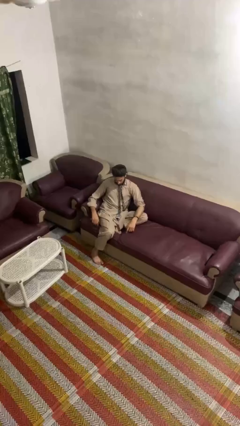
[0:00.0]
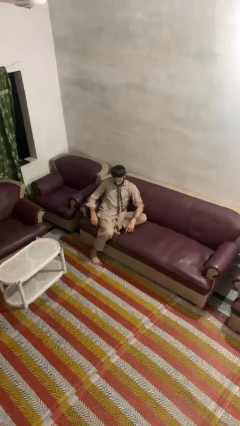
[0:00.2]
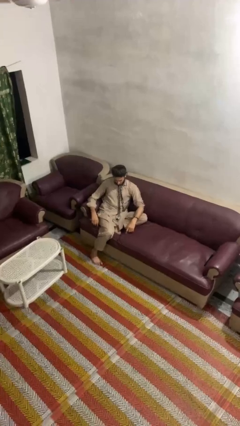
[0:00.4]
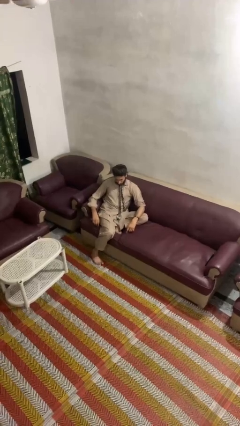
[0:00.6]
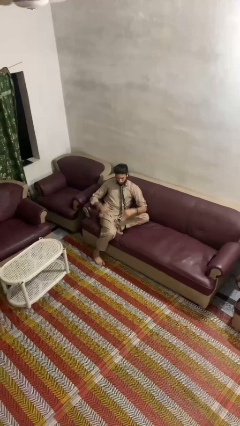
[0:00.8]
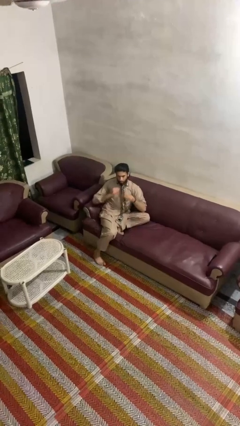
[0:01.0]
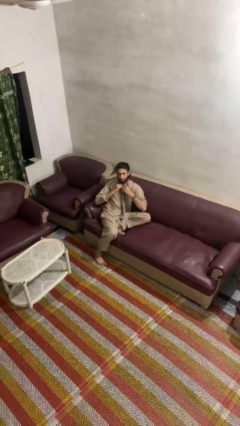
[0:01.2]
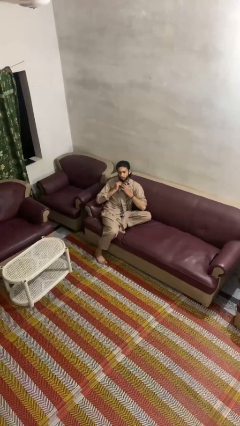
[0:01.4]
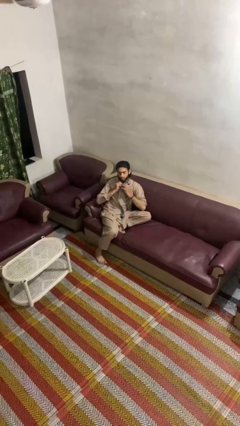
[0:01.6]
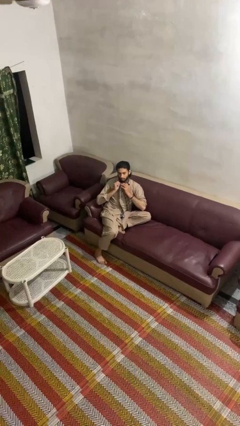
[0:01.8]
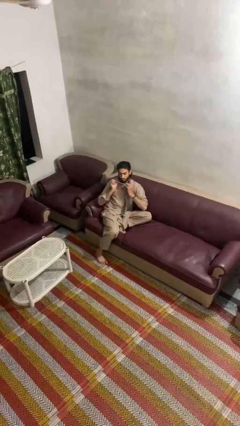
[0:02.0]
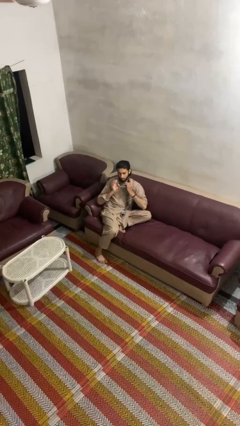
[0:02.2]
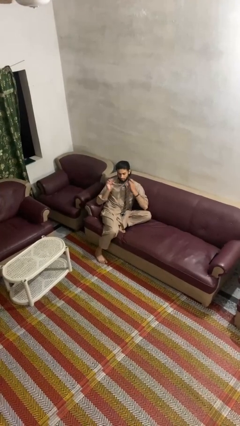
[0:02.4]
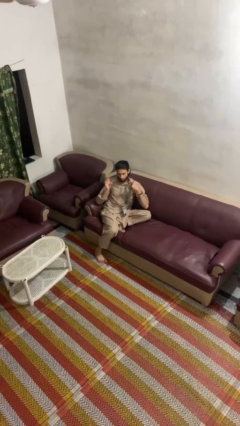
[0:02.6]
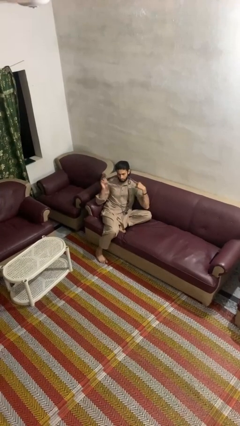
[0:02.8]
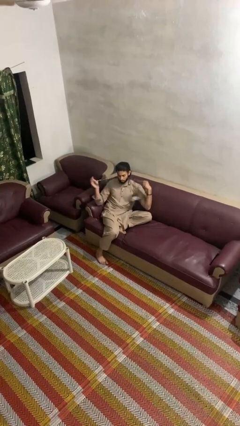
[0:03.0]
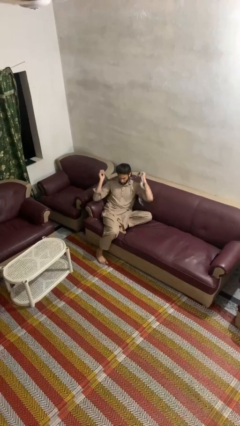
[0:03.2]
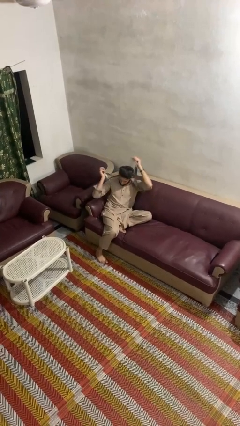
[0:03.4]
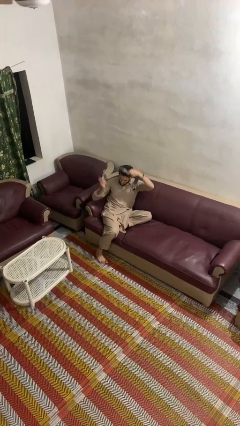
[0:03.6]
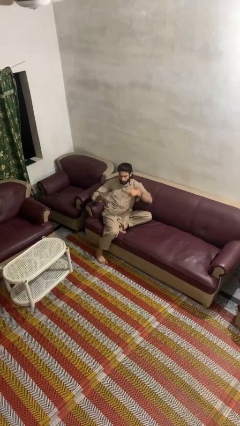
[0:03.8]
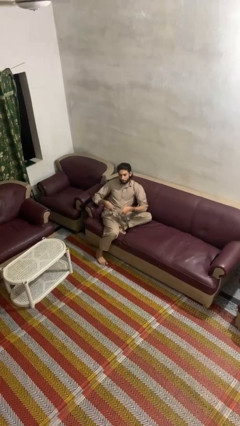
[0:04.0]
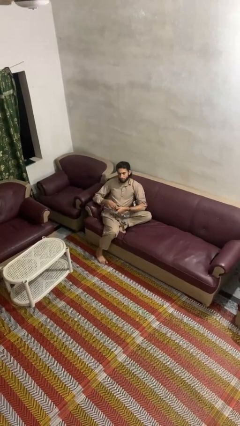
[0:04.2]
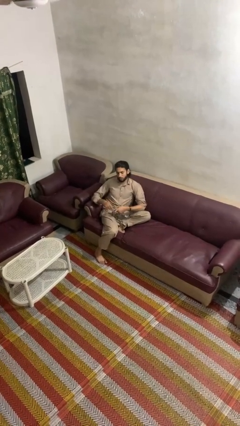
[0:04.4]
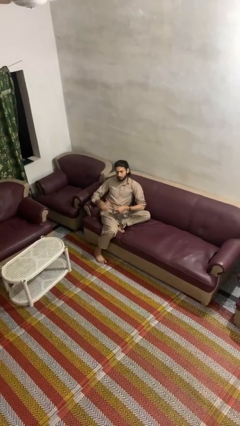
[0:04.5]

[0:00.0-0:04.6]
person takes off necktie

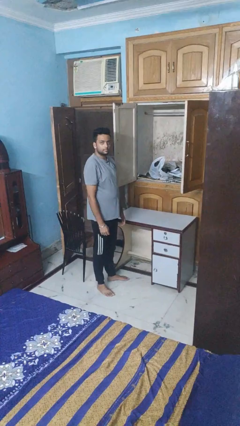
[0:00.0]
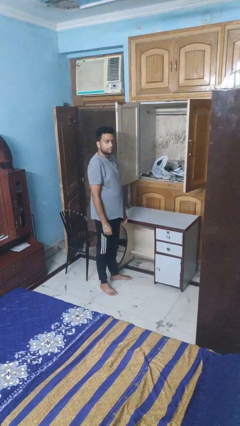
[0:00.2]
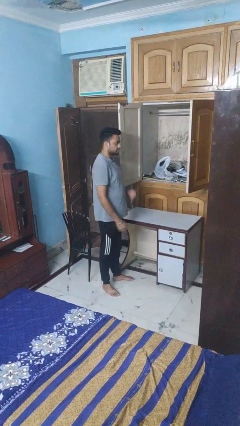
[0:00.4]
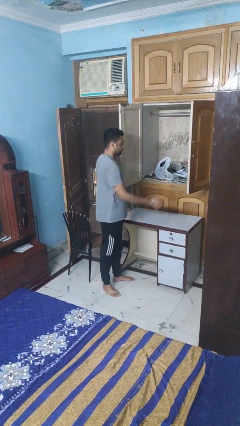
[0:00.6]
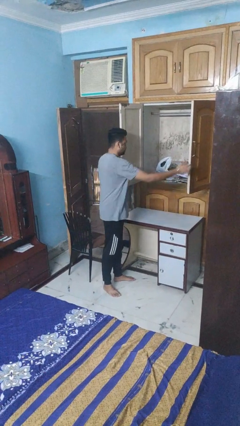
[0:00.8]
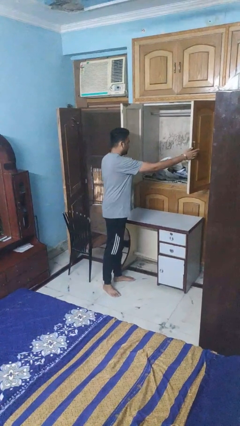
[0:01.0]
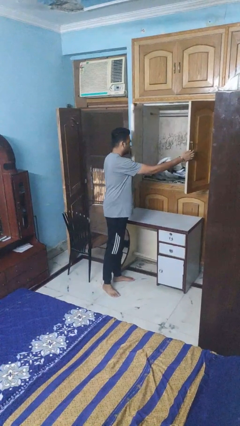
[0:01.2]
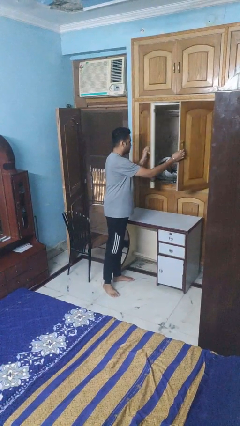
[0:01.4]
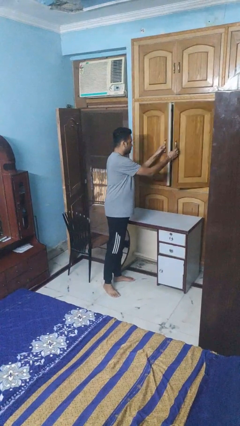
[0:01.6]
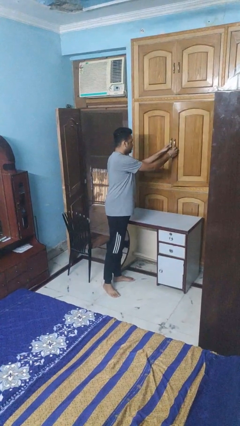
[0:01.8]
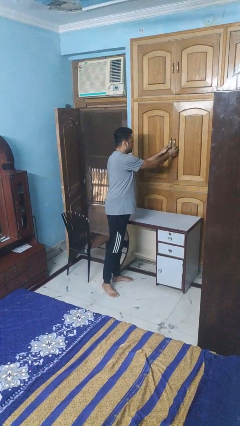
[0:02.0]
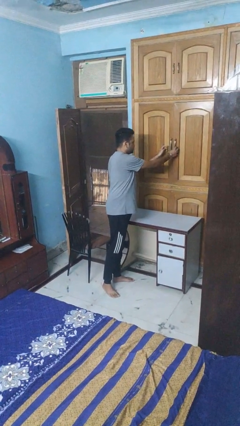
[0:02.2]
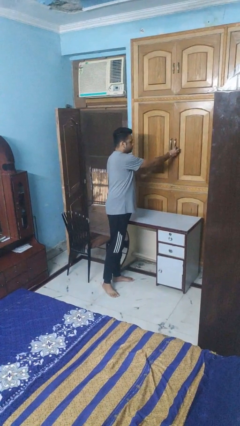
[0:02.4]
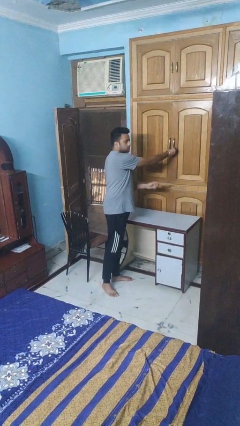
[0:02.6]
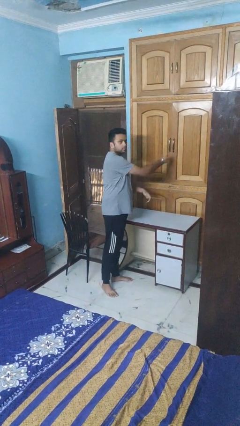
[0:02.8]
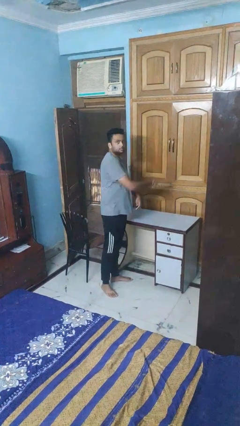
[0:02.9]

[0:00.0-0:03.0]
person closes closet door

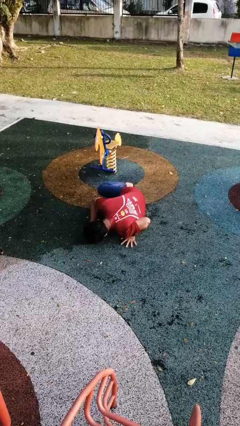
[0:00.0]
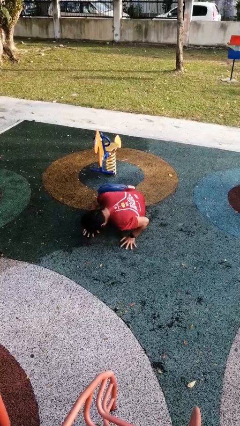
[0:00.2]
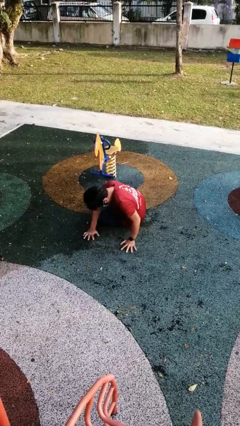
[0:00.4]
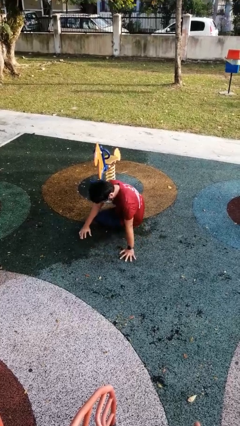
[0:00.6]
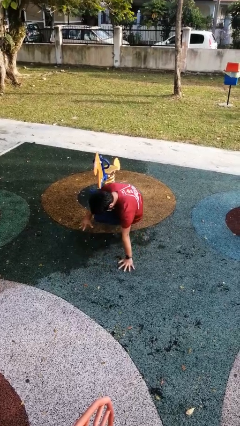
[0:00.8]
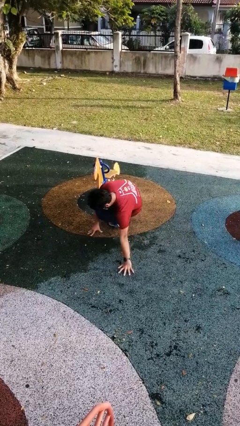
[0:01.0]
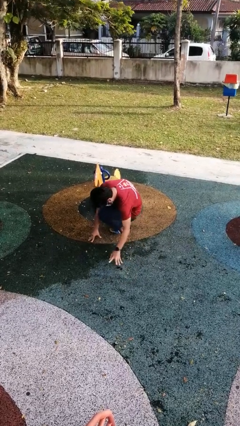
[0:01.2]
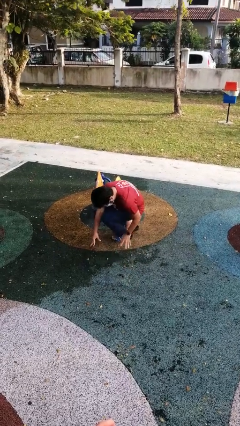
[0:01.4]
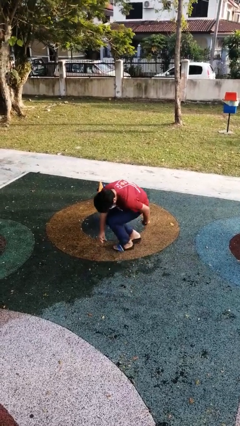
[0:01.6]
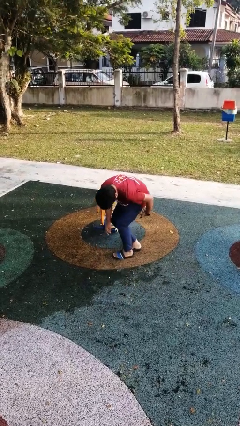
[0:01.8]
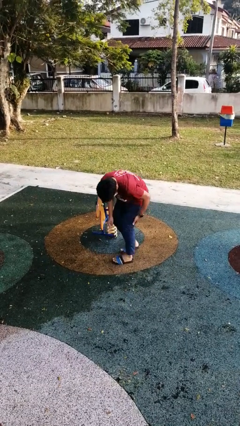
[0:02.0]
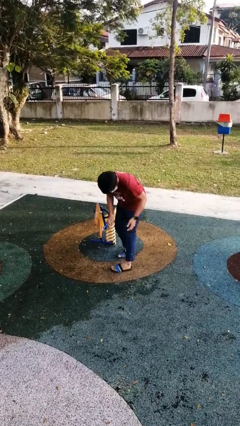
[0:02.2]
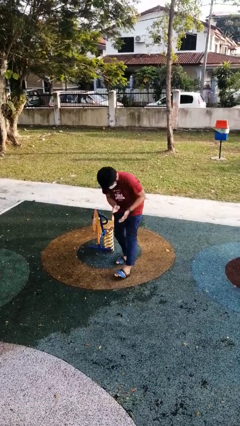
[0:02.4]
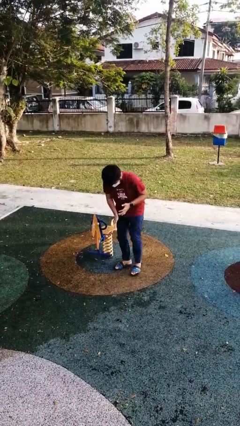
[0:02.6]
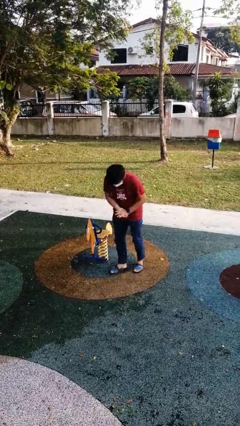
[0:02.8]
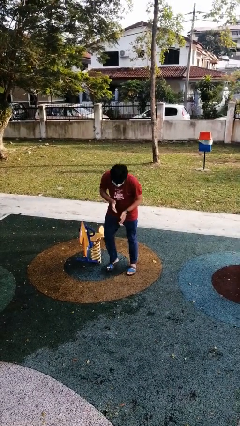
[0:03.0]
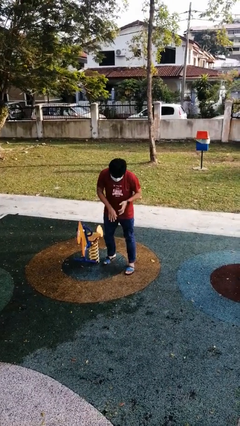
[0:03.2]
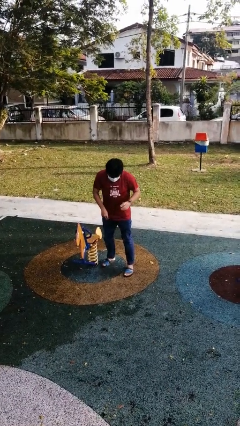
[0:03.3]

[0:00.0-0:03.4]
person stands up from floor

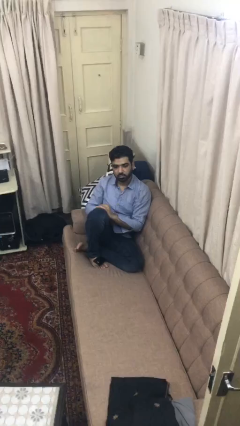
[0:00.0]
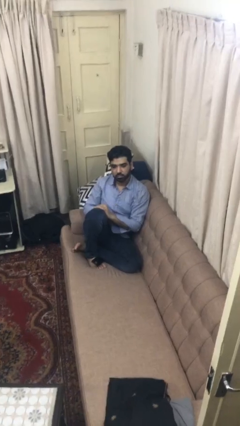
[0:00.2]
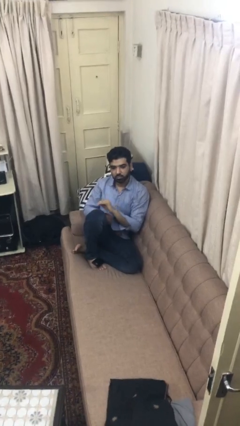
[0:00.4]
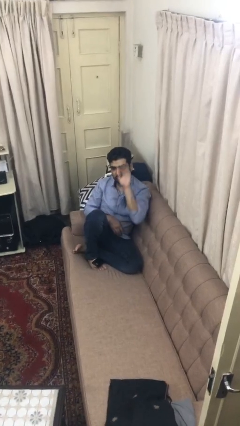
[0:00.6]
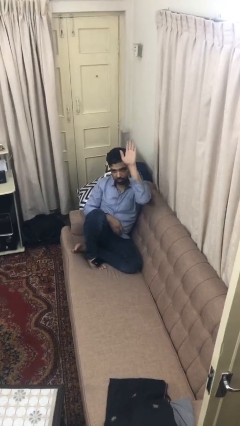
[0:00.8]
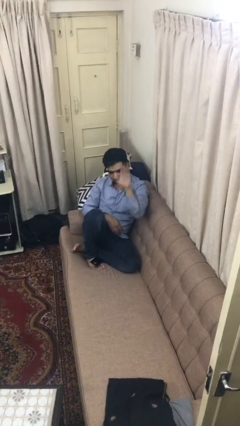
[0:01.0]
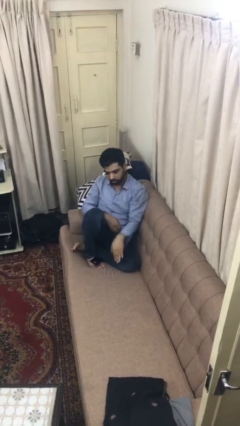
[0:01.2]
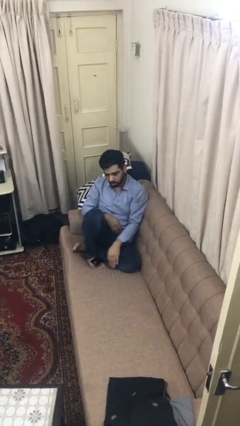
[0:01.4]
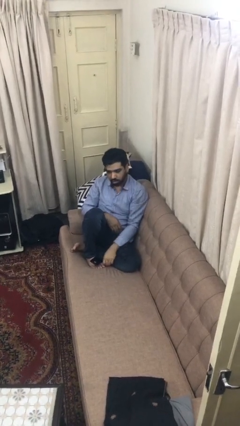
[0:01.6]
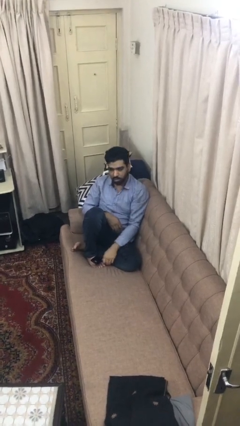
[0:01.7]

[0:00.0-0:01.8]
person gestures swipe down

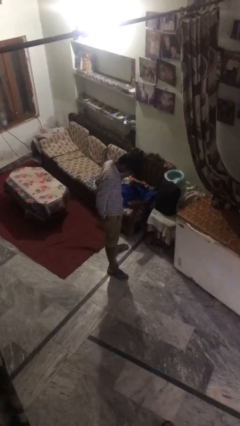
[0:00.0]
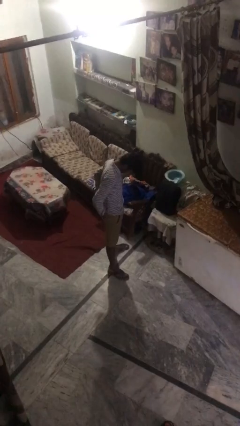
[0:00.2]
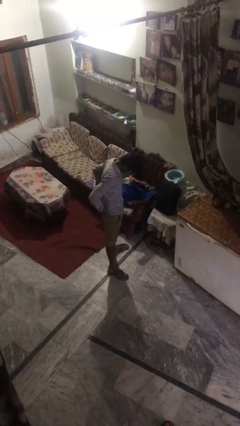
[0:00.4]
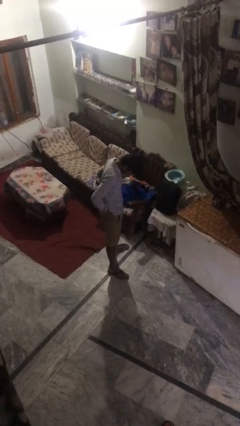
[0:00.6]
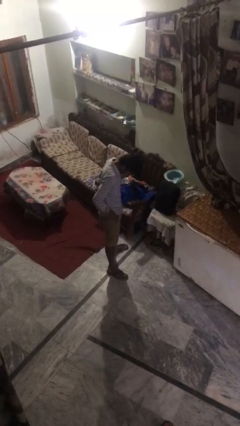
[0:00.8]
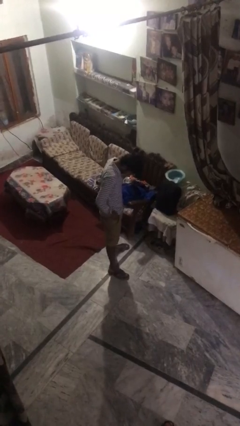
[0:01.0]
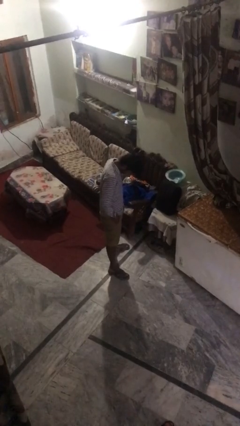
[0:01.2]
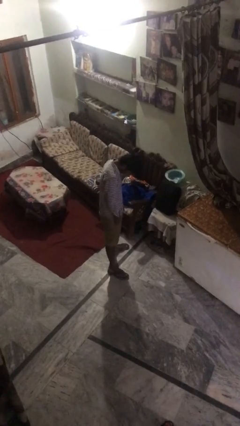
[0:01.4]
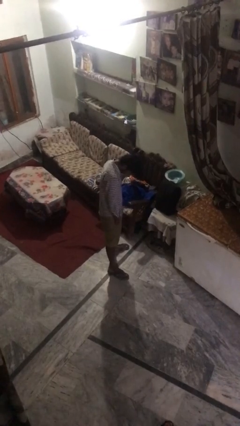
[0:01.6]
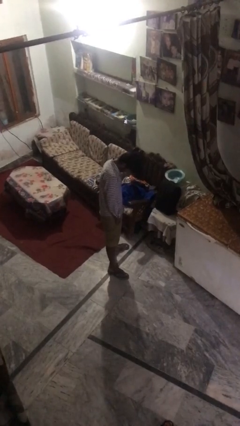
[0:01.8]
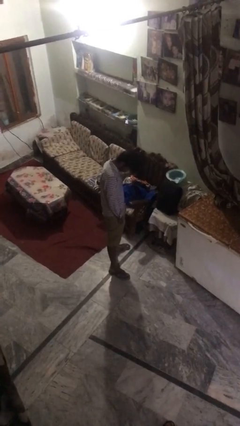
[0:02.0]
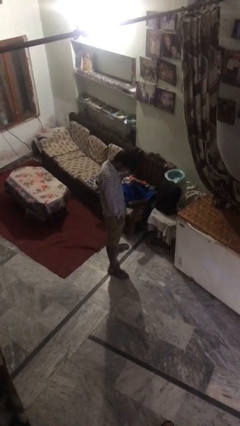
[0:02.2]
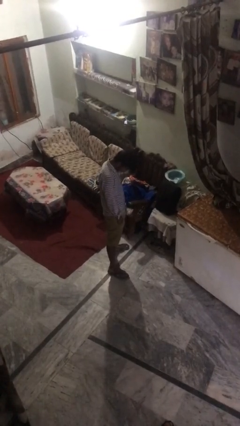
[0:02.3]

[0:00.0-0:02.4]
person puts hands in back pockets

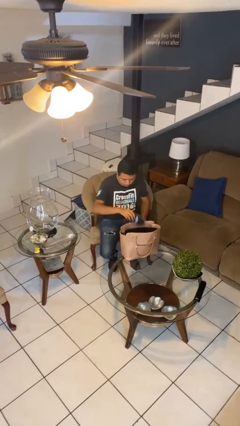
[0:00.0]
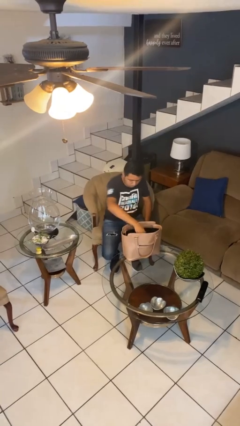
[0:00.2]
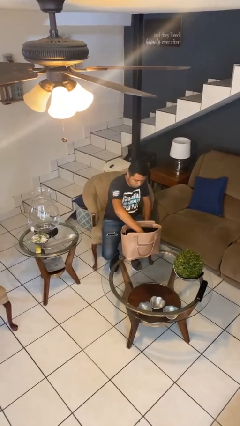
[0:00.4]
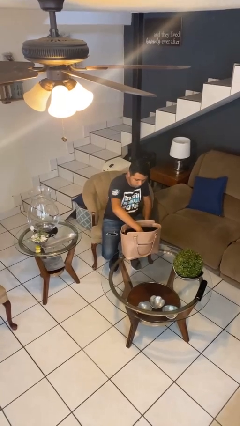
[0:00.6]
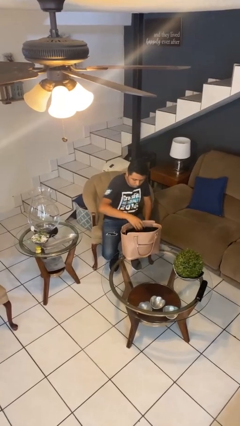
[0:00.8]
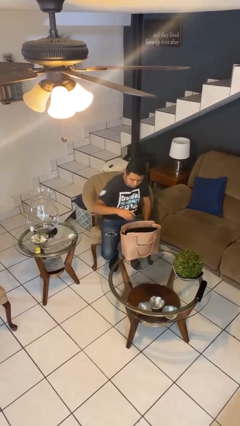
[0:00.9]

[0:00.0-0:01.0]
person puts object into purse

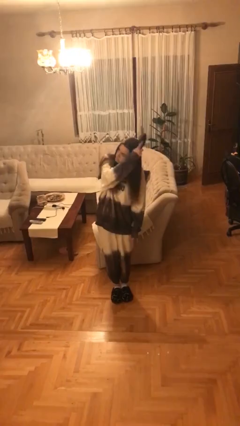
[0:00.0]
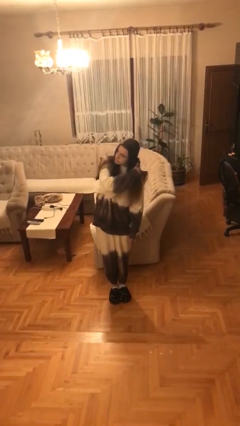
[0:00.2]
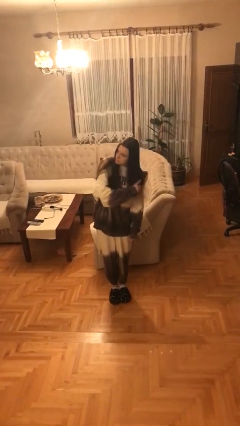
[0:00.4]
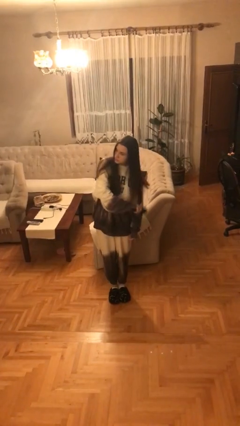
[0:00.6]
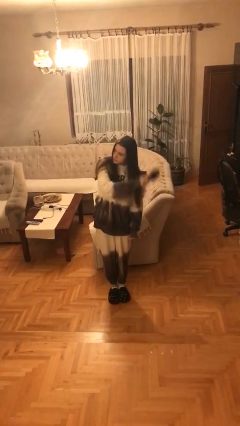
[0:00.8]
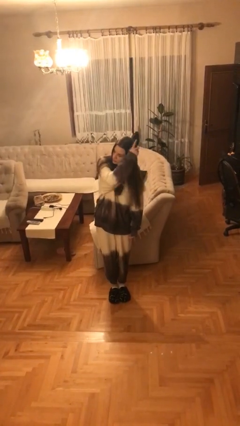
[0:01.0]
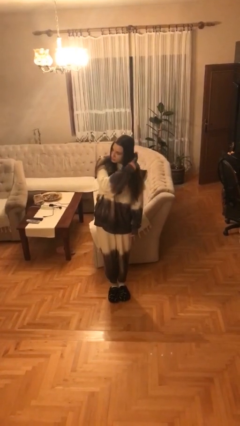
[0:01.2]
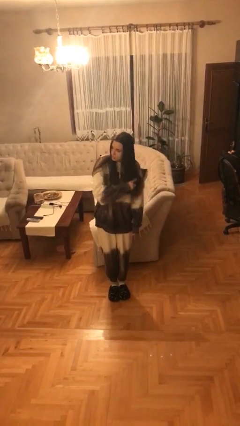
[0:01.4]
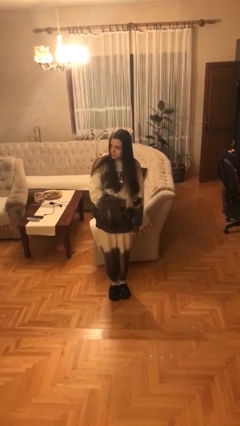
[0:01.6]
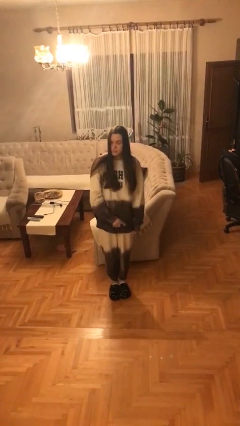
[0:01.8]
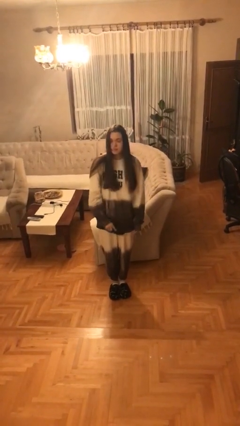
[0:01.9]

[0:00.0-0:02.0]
person brushes hair
